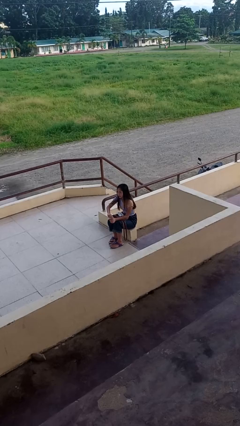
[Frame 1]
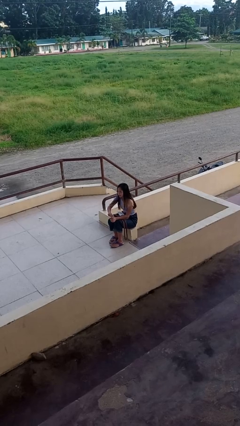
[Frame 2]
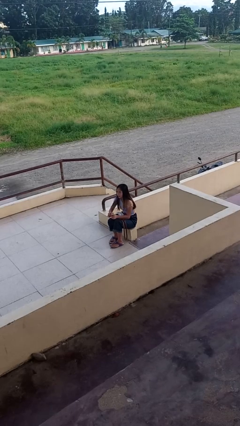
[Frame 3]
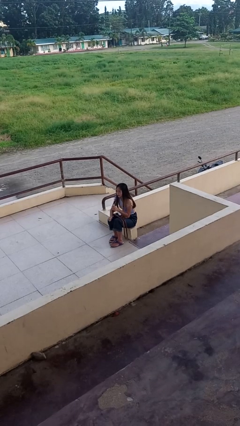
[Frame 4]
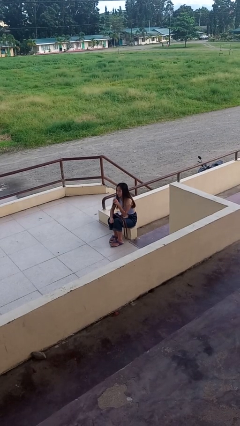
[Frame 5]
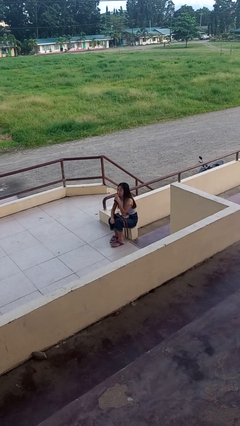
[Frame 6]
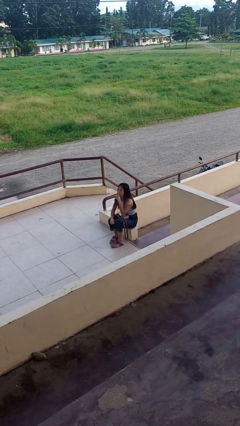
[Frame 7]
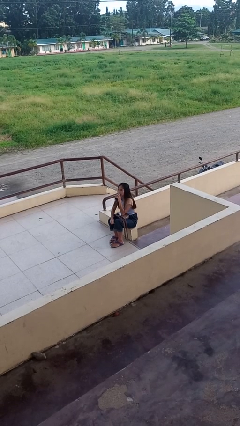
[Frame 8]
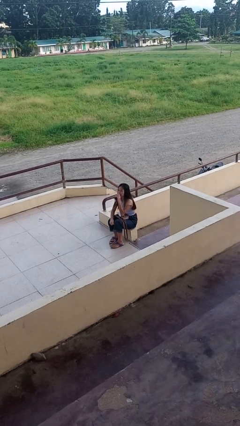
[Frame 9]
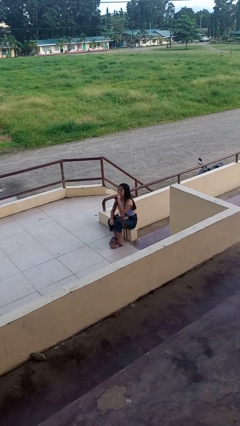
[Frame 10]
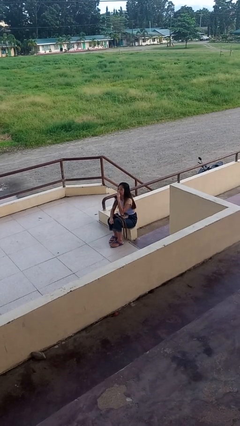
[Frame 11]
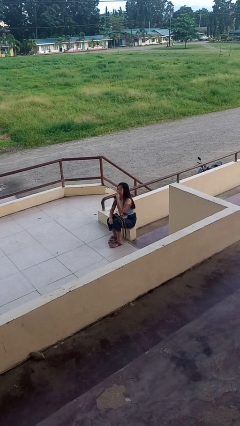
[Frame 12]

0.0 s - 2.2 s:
person drinks from beverage can

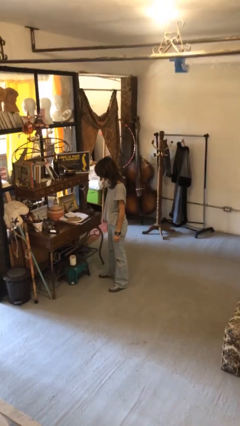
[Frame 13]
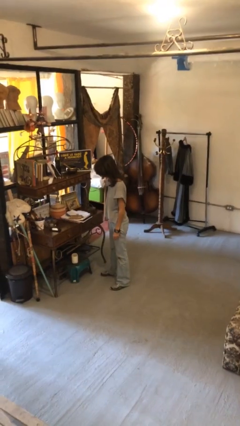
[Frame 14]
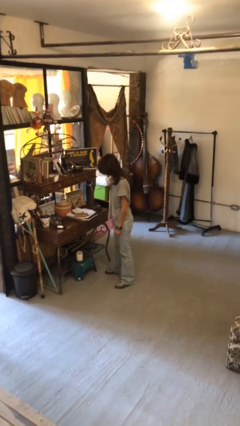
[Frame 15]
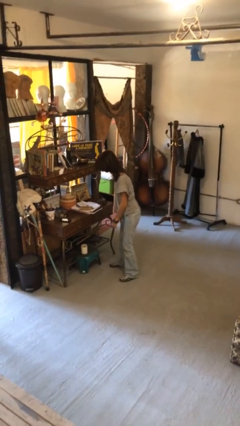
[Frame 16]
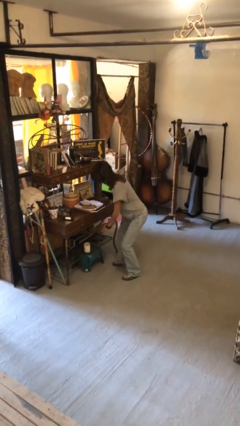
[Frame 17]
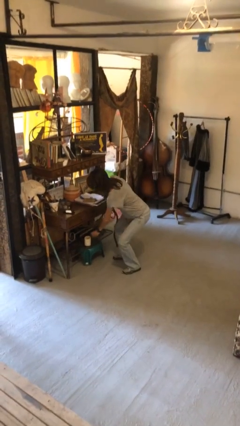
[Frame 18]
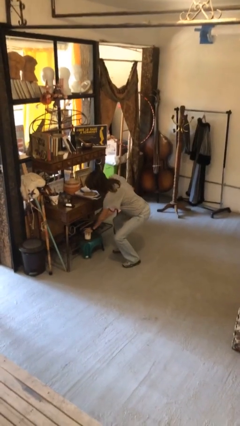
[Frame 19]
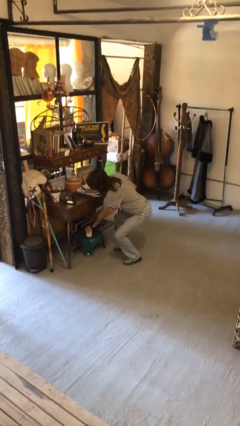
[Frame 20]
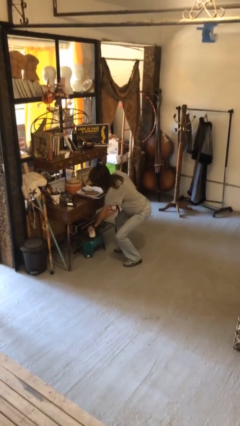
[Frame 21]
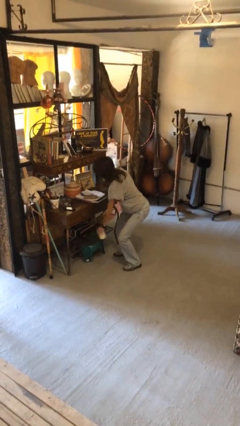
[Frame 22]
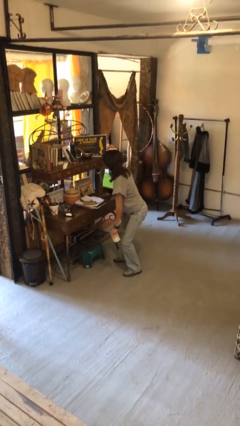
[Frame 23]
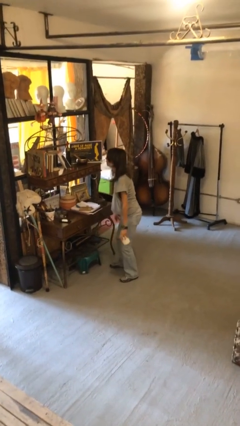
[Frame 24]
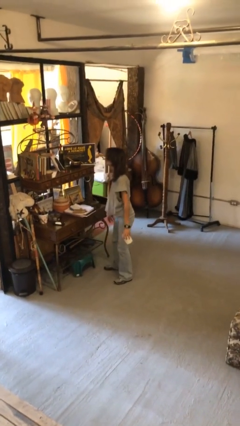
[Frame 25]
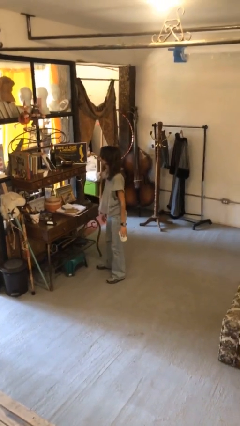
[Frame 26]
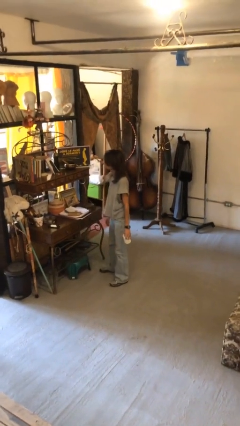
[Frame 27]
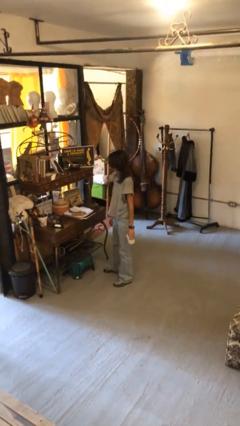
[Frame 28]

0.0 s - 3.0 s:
person picks up object from cabinet

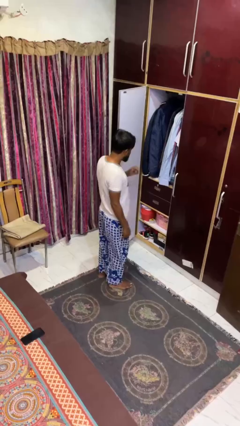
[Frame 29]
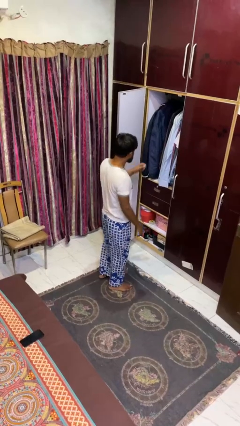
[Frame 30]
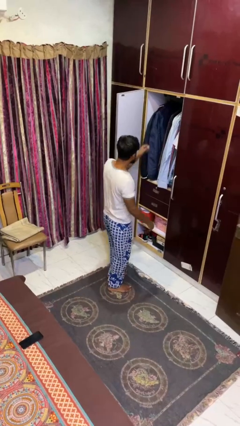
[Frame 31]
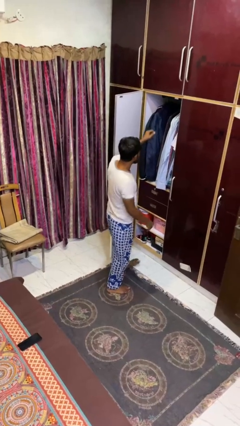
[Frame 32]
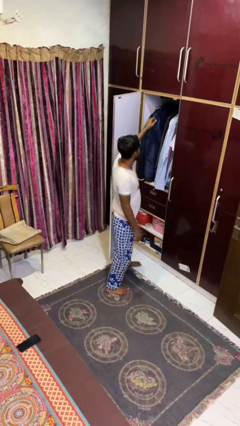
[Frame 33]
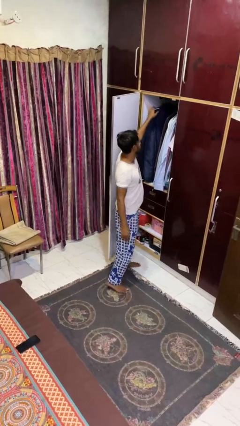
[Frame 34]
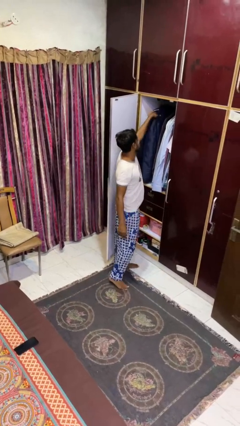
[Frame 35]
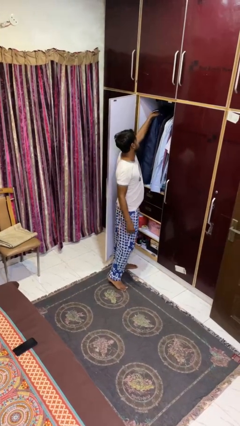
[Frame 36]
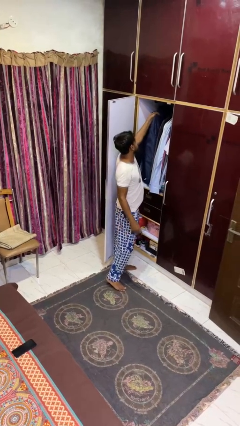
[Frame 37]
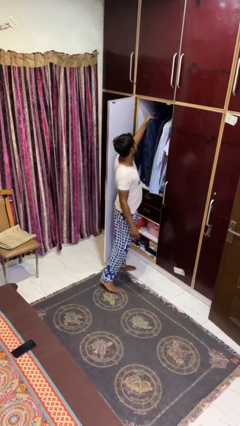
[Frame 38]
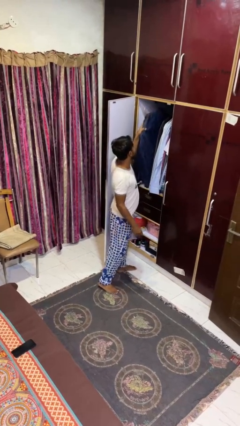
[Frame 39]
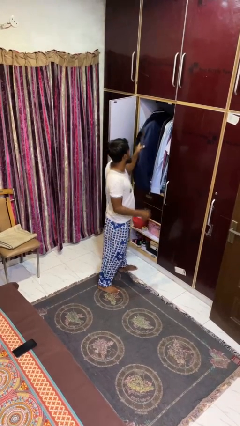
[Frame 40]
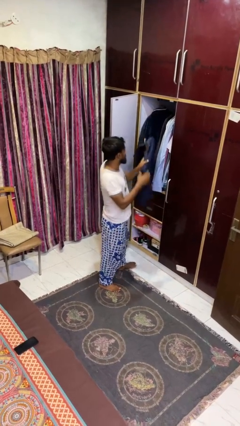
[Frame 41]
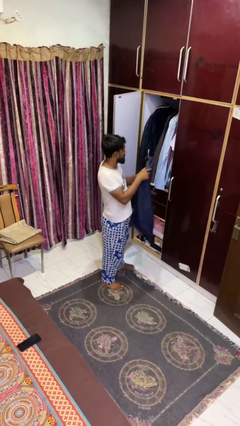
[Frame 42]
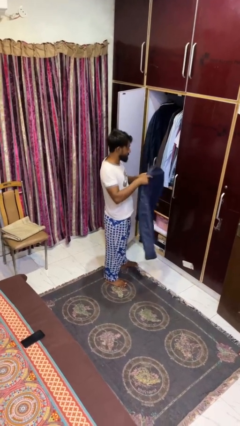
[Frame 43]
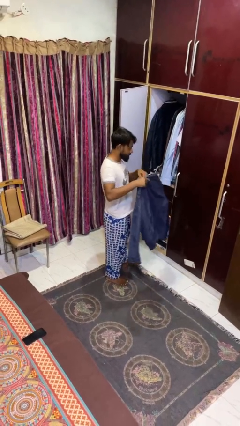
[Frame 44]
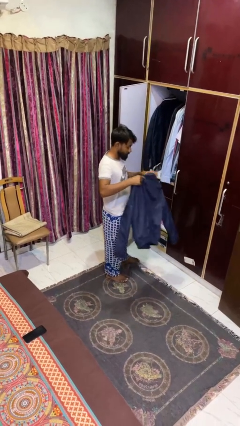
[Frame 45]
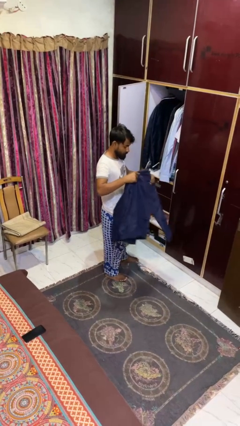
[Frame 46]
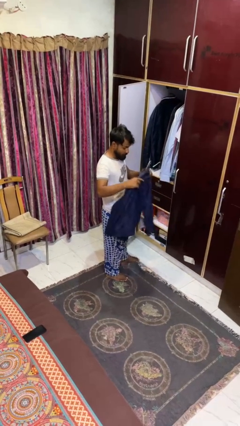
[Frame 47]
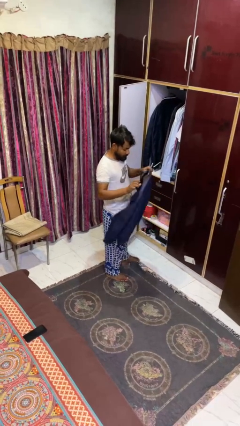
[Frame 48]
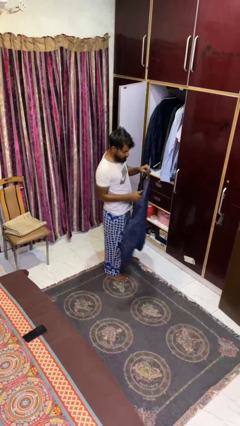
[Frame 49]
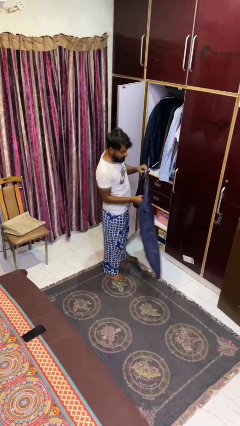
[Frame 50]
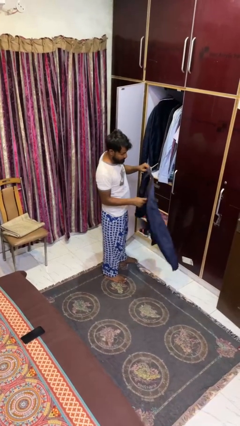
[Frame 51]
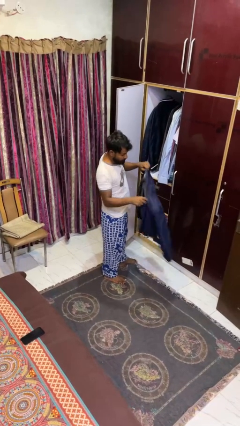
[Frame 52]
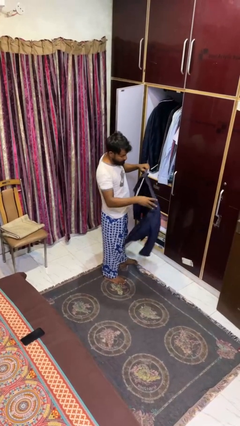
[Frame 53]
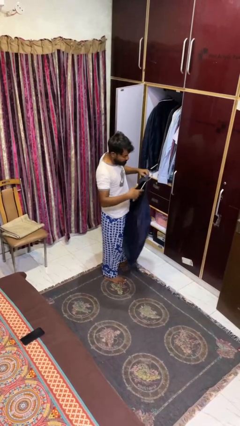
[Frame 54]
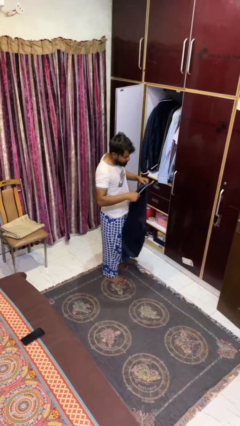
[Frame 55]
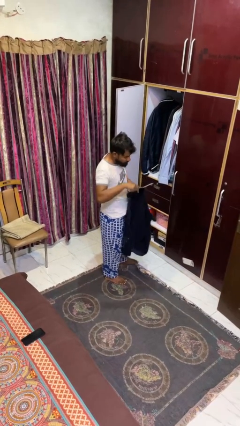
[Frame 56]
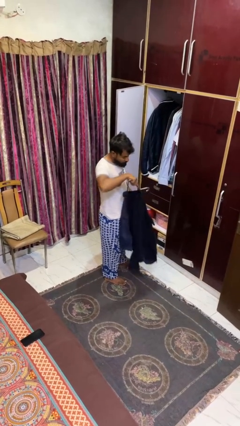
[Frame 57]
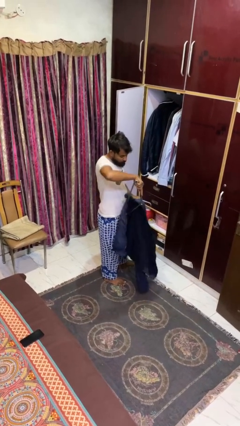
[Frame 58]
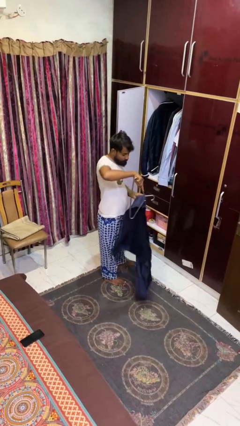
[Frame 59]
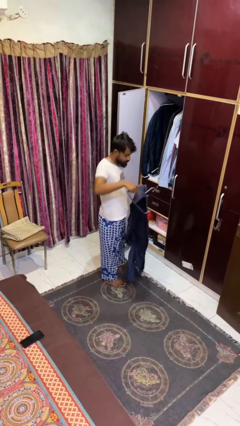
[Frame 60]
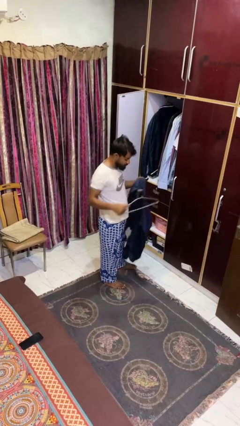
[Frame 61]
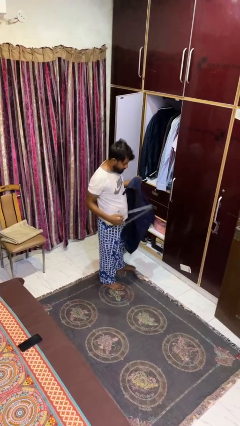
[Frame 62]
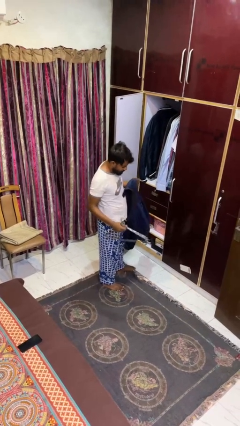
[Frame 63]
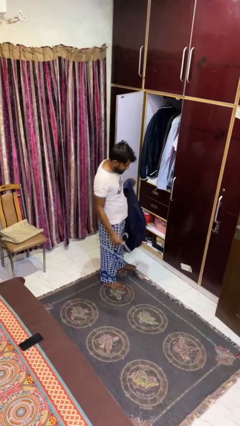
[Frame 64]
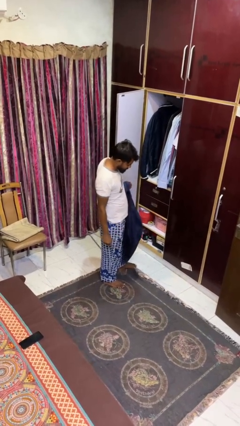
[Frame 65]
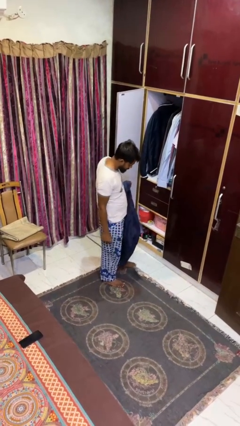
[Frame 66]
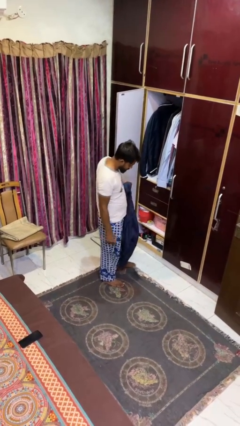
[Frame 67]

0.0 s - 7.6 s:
person takes clothes from closet

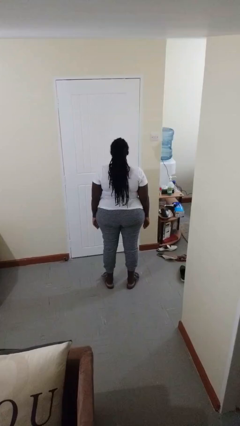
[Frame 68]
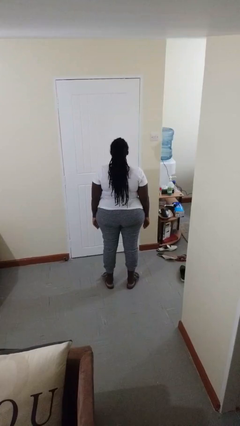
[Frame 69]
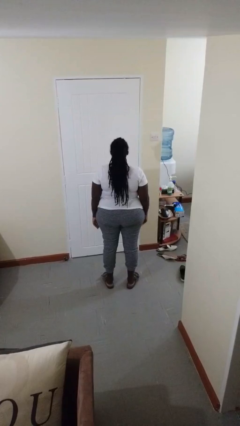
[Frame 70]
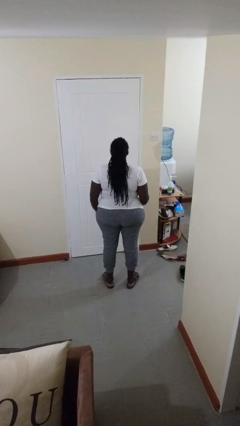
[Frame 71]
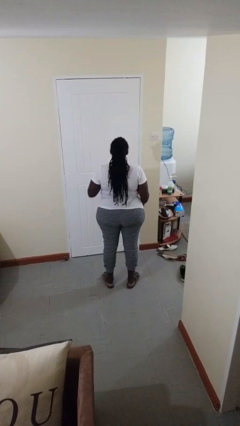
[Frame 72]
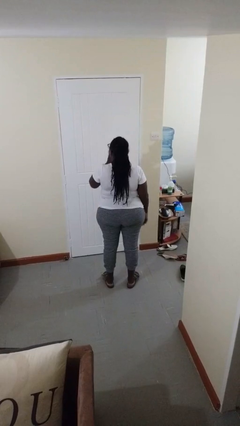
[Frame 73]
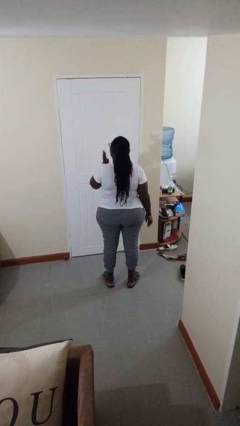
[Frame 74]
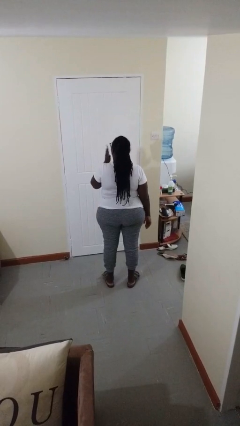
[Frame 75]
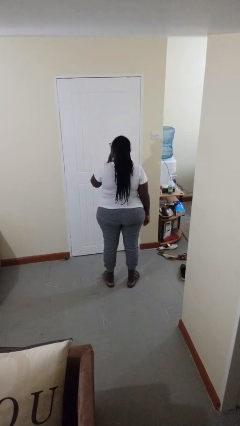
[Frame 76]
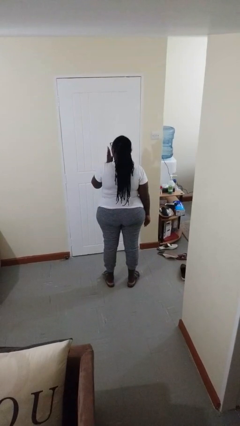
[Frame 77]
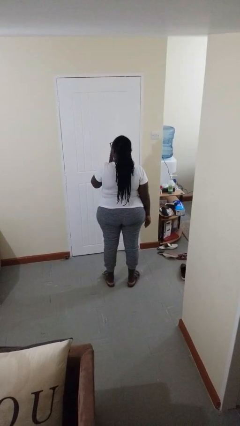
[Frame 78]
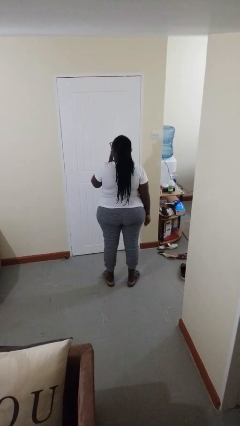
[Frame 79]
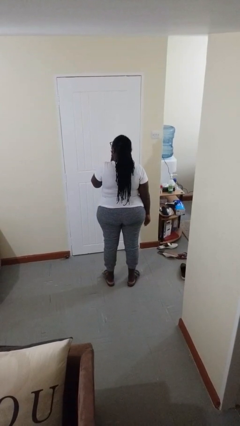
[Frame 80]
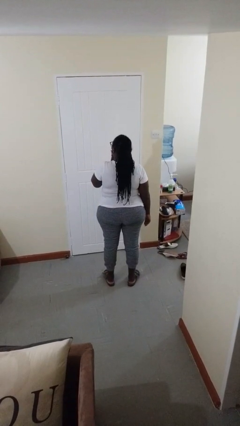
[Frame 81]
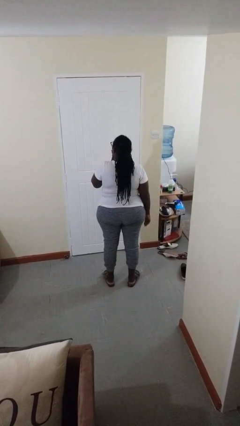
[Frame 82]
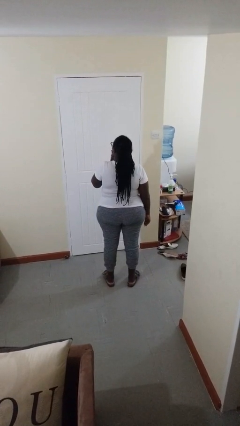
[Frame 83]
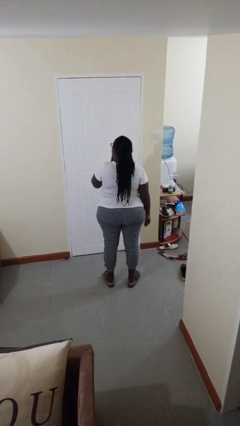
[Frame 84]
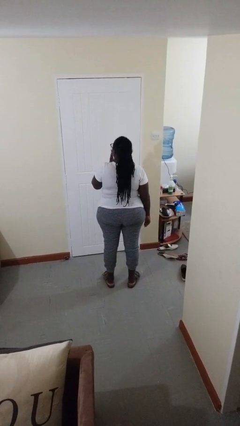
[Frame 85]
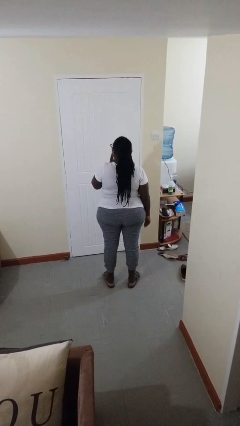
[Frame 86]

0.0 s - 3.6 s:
person swats bug

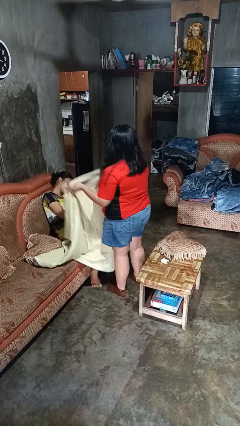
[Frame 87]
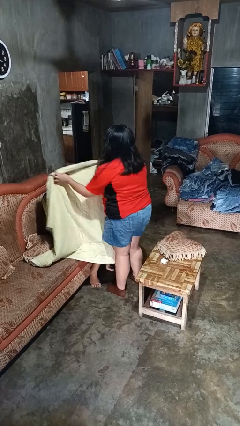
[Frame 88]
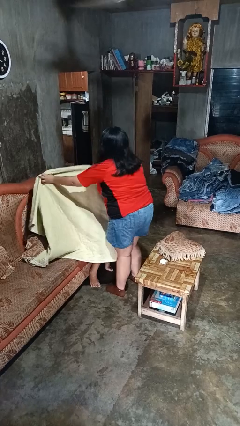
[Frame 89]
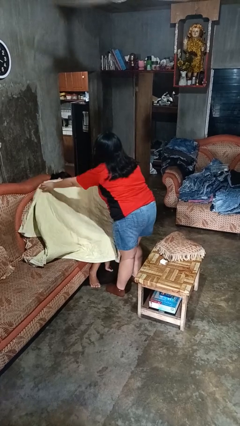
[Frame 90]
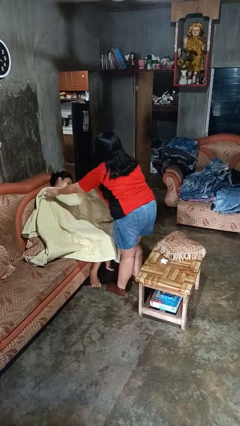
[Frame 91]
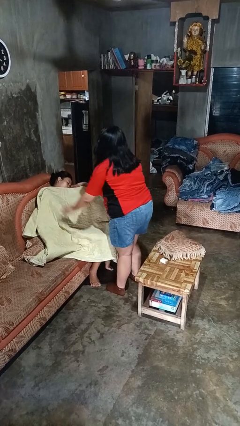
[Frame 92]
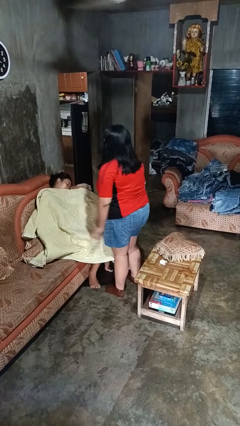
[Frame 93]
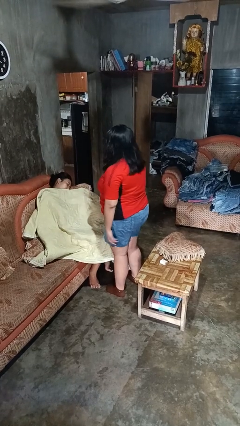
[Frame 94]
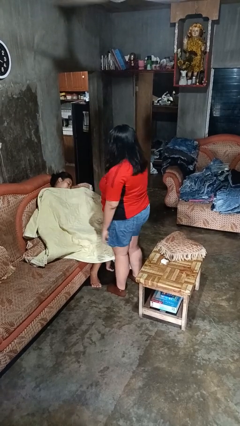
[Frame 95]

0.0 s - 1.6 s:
person covers friend with blanket
